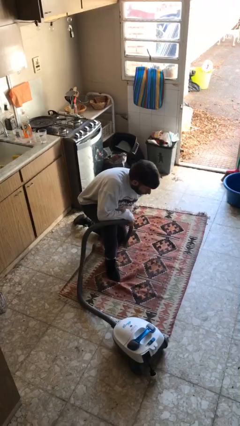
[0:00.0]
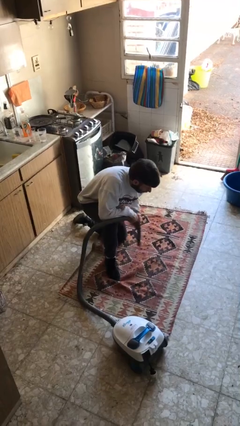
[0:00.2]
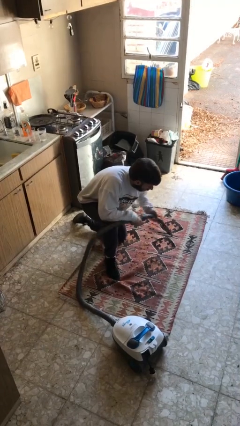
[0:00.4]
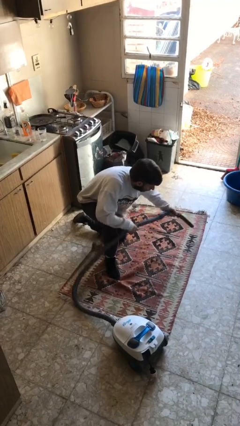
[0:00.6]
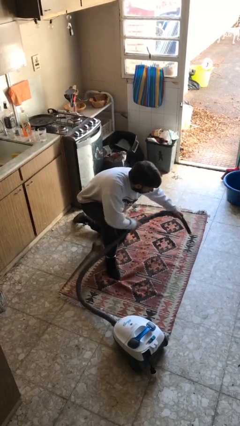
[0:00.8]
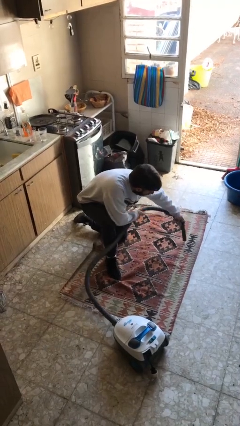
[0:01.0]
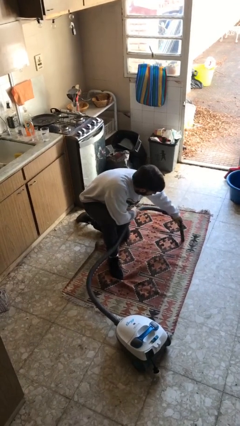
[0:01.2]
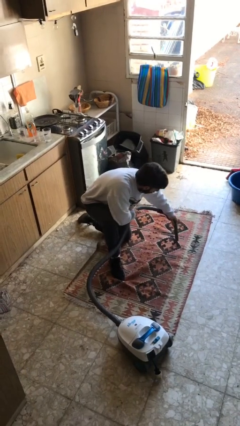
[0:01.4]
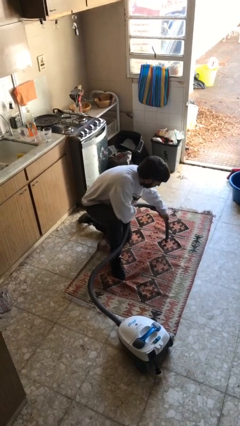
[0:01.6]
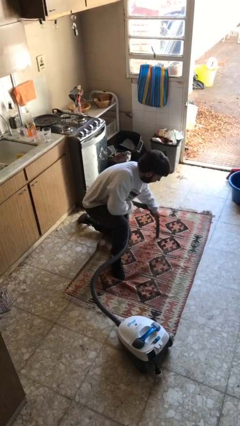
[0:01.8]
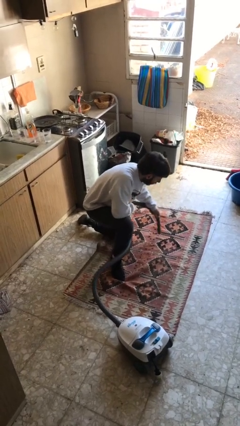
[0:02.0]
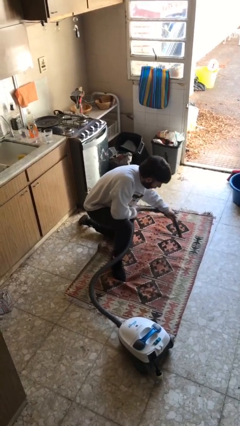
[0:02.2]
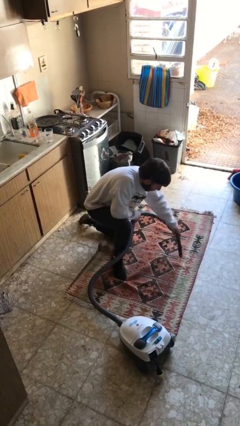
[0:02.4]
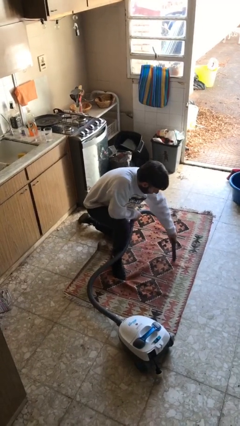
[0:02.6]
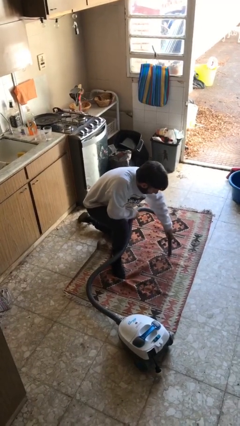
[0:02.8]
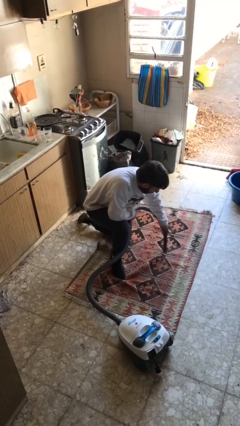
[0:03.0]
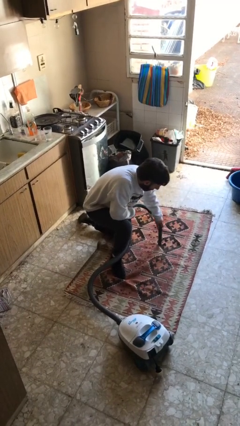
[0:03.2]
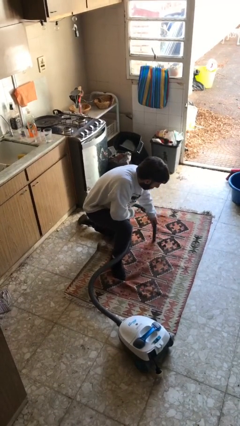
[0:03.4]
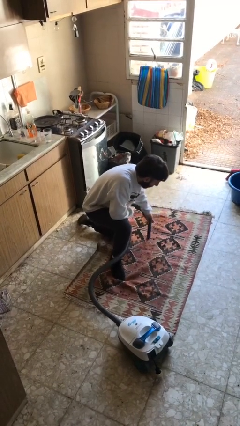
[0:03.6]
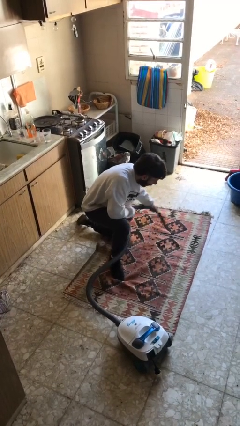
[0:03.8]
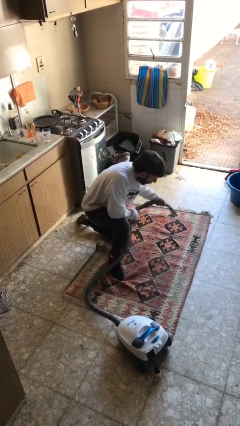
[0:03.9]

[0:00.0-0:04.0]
person vacuums carpet

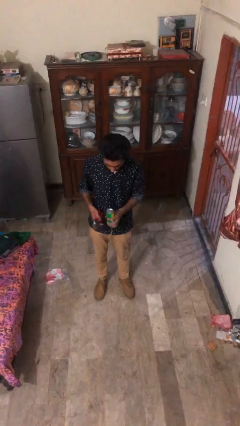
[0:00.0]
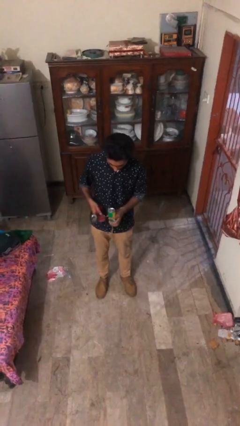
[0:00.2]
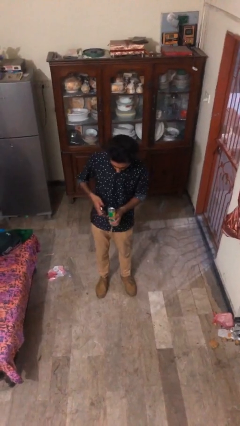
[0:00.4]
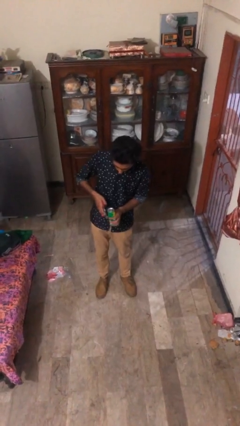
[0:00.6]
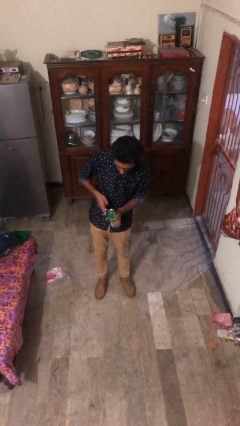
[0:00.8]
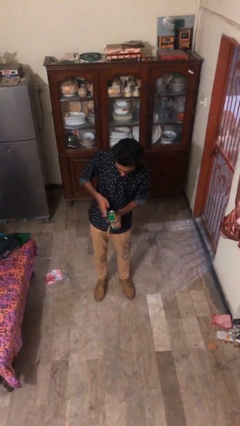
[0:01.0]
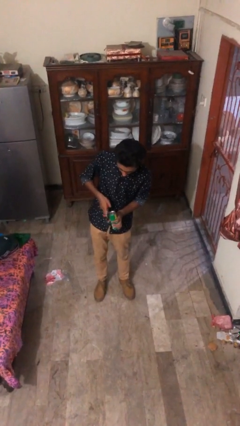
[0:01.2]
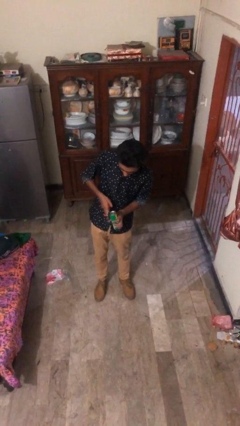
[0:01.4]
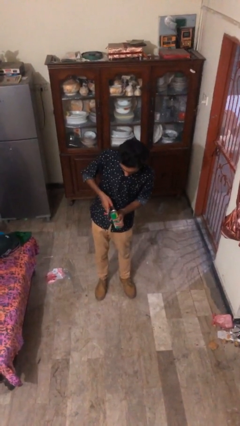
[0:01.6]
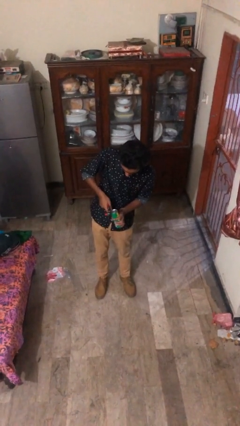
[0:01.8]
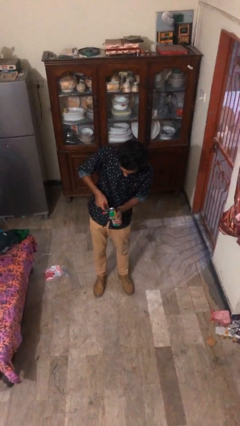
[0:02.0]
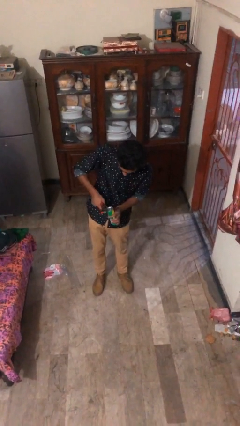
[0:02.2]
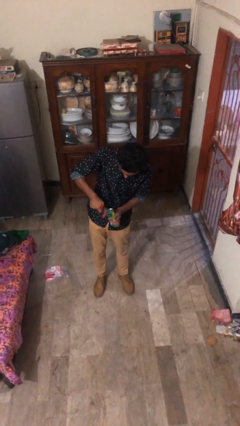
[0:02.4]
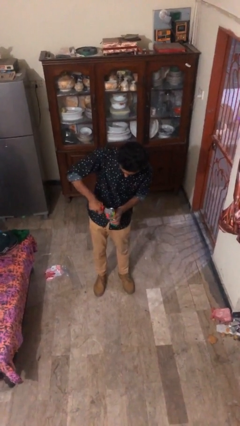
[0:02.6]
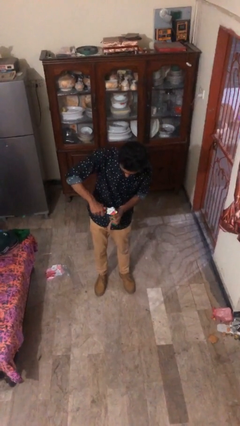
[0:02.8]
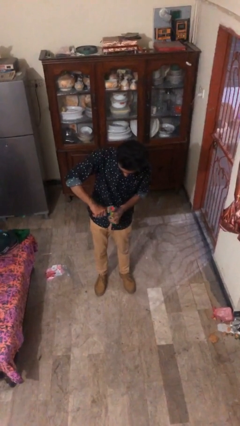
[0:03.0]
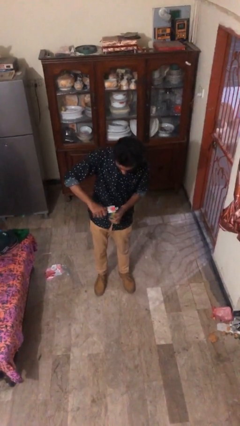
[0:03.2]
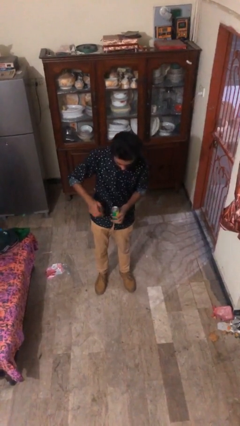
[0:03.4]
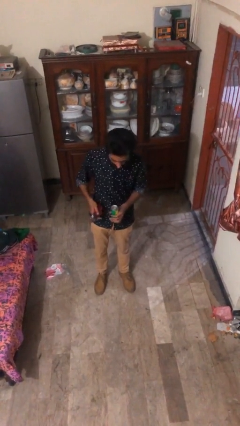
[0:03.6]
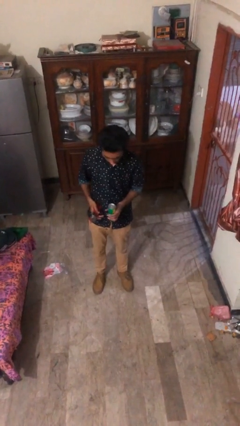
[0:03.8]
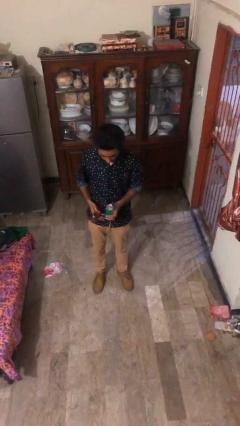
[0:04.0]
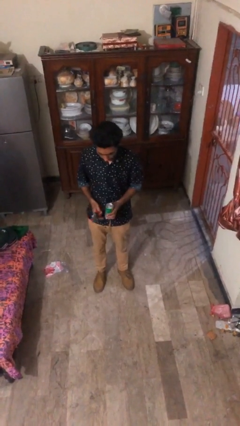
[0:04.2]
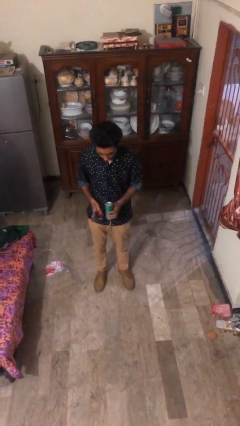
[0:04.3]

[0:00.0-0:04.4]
person opens can with can opener

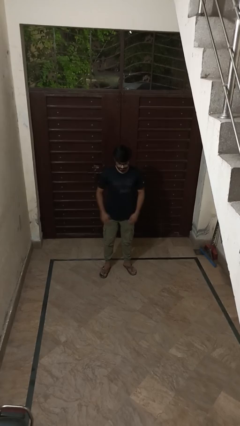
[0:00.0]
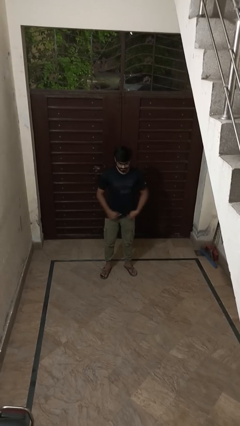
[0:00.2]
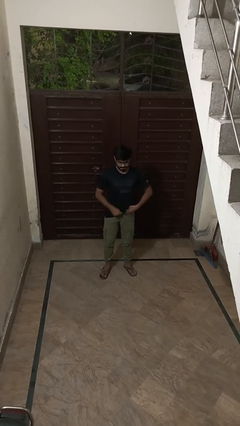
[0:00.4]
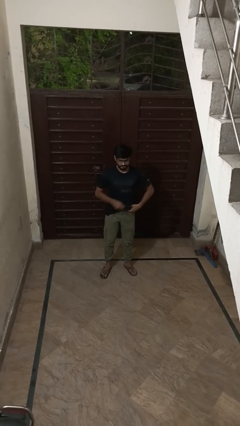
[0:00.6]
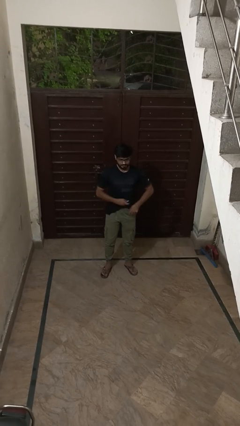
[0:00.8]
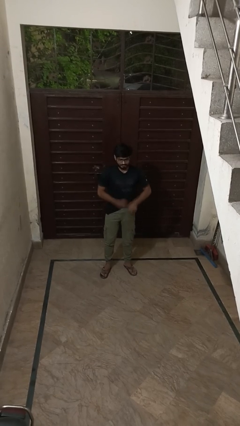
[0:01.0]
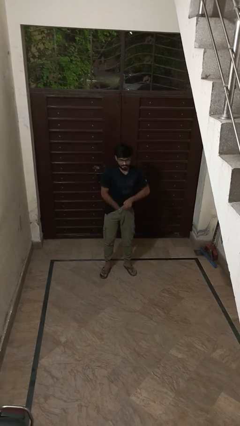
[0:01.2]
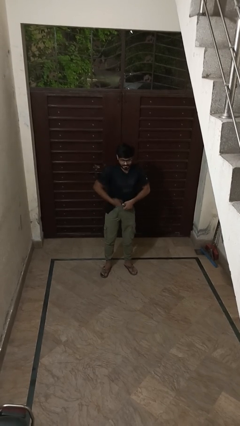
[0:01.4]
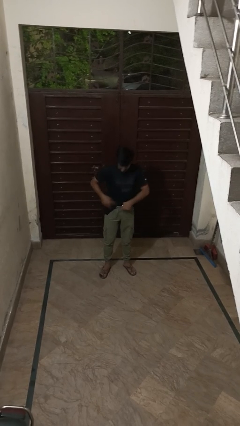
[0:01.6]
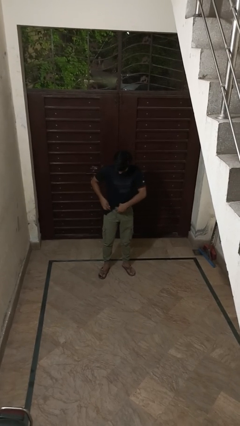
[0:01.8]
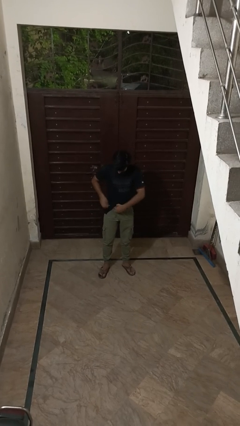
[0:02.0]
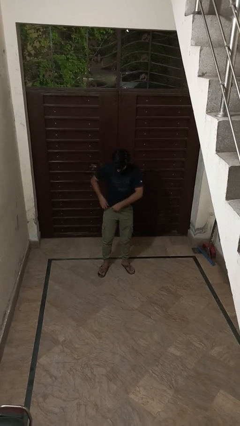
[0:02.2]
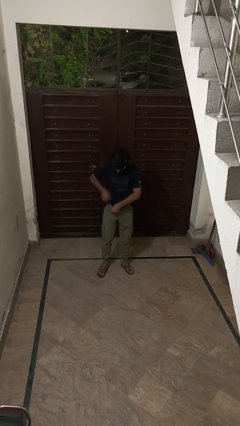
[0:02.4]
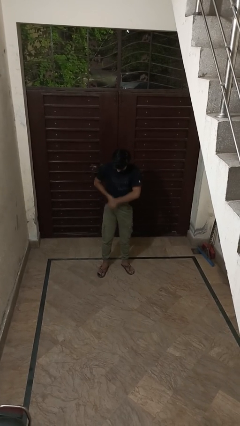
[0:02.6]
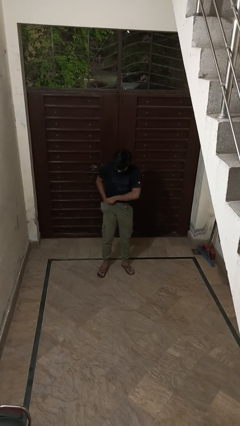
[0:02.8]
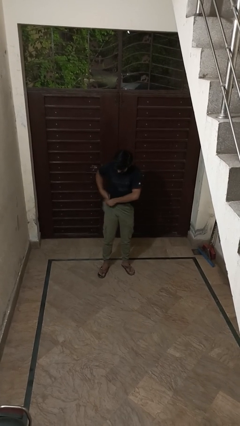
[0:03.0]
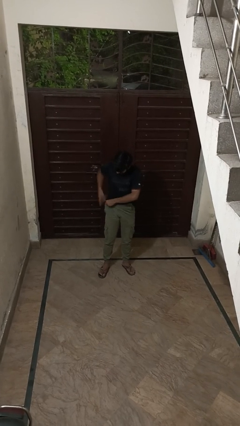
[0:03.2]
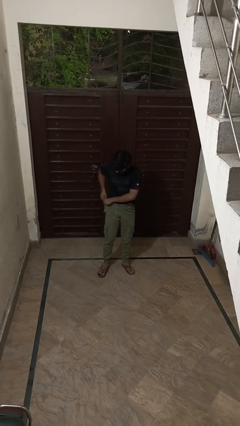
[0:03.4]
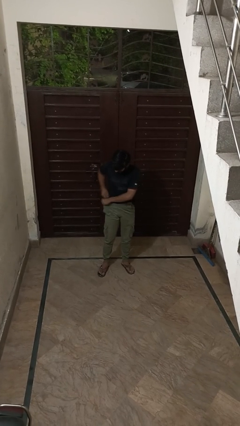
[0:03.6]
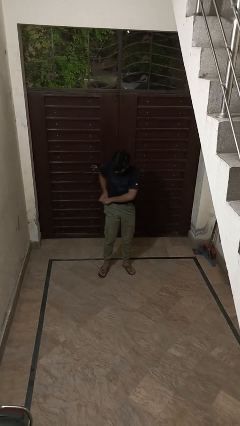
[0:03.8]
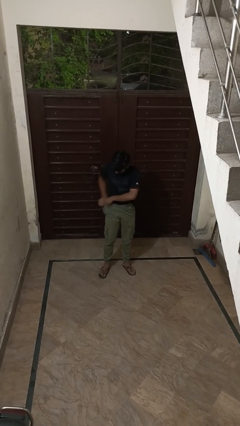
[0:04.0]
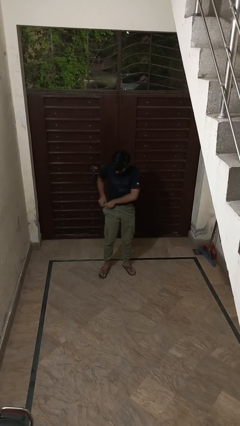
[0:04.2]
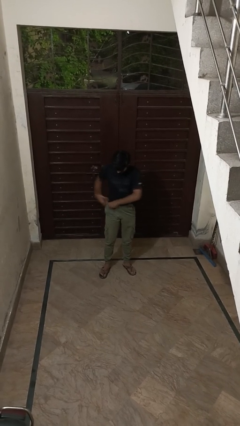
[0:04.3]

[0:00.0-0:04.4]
person tucks in shirt

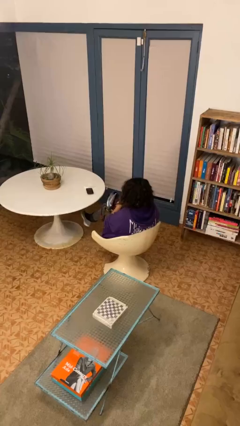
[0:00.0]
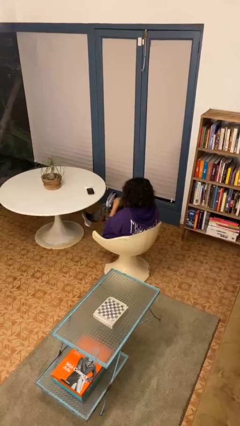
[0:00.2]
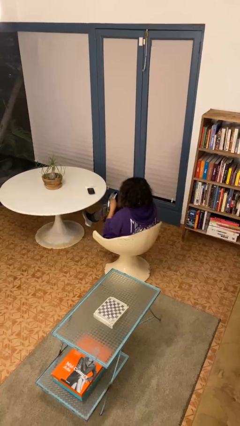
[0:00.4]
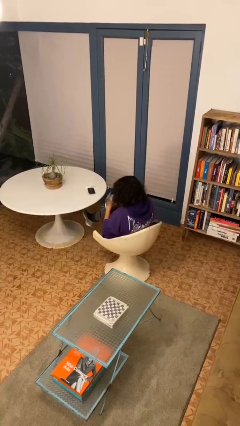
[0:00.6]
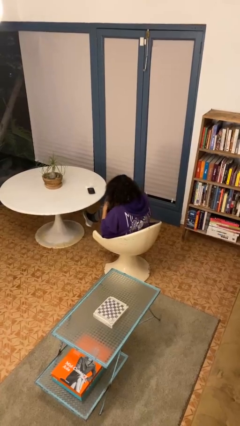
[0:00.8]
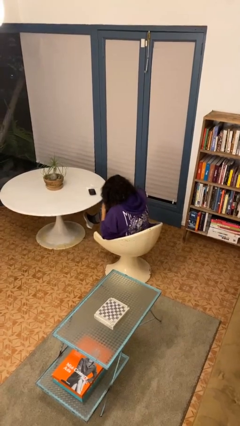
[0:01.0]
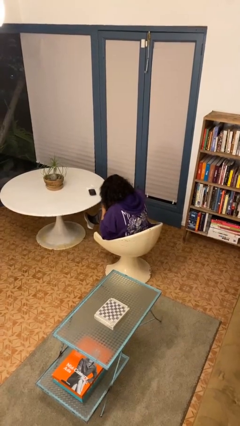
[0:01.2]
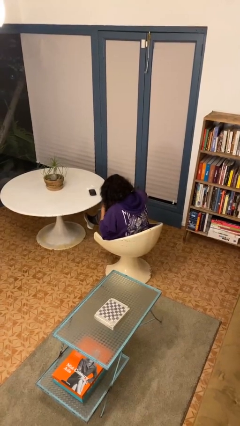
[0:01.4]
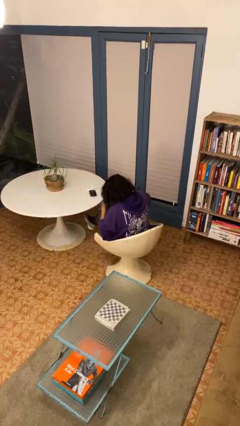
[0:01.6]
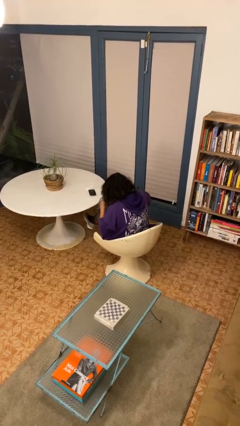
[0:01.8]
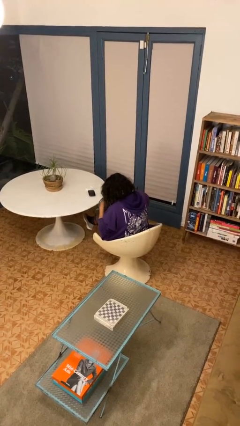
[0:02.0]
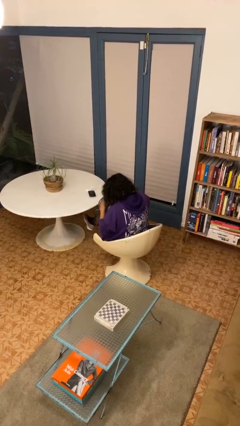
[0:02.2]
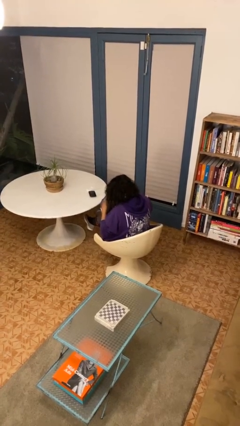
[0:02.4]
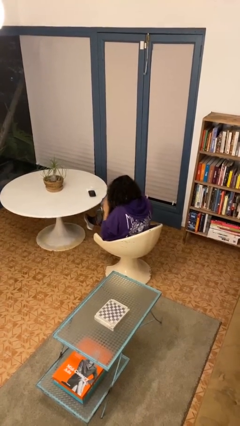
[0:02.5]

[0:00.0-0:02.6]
person searches in bag

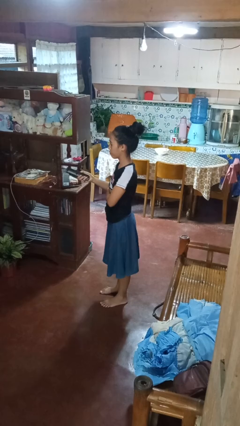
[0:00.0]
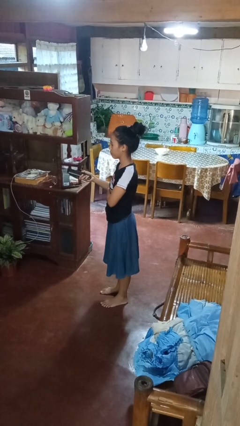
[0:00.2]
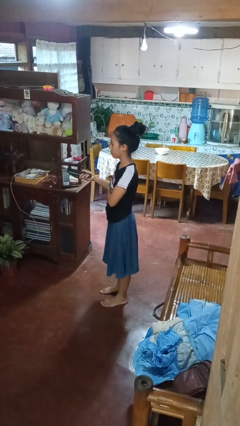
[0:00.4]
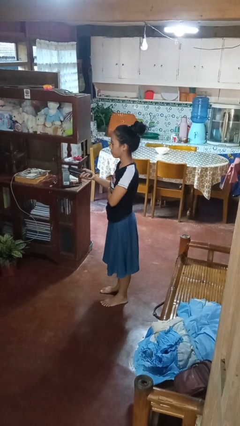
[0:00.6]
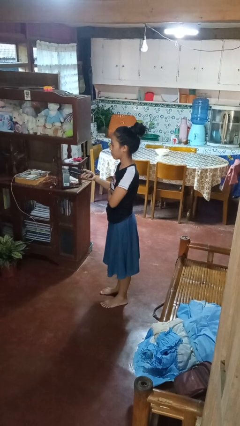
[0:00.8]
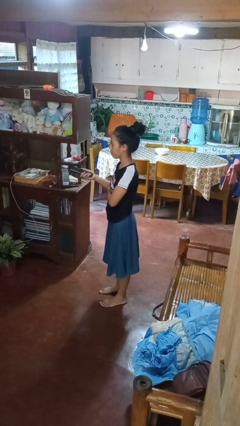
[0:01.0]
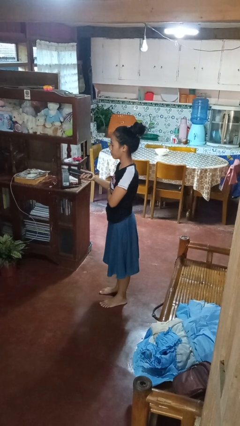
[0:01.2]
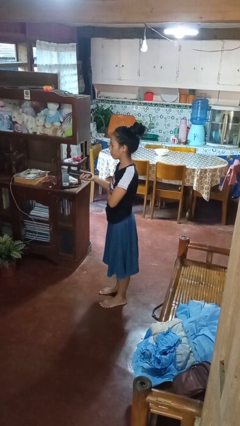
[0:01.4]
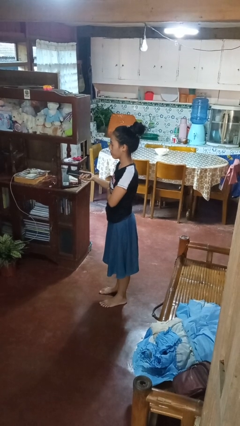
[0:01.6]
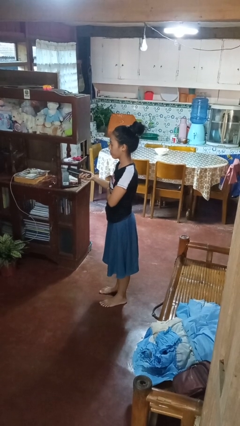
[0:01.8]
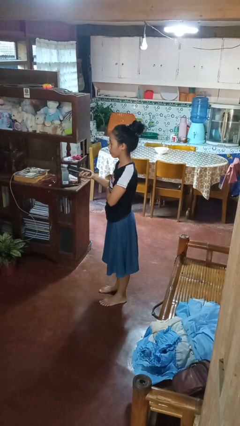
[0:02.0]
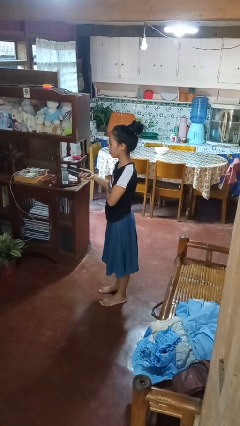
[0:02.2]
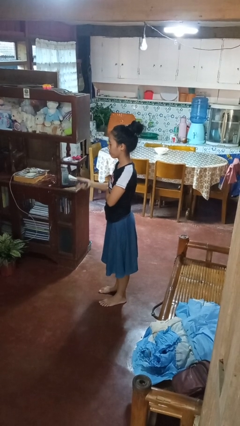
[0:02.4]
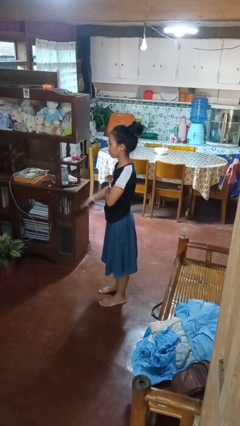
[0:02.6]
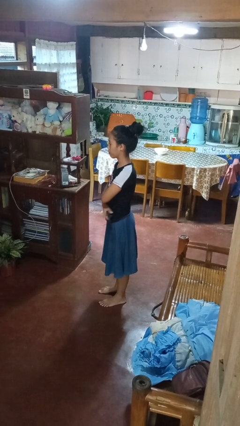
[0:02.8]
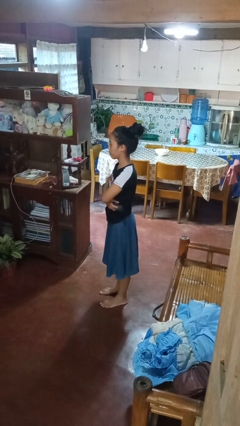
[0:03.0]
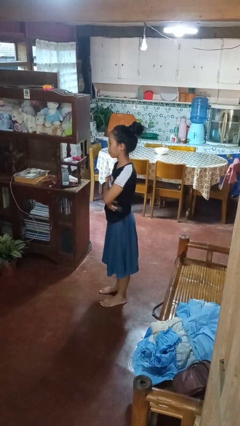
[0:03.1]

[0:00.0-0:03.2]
person uses television remote
